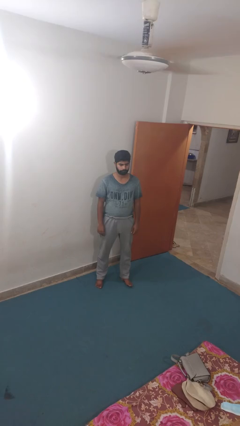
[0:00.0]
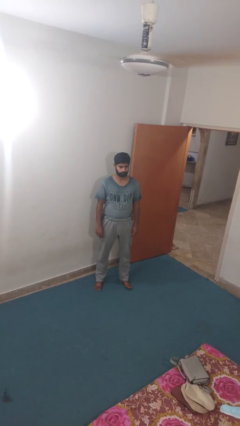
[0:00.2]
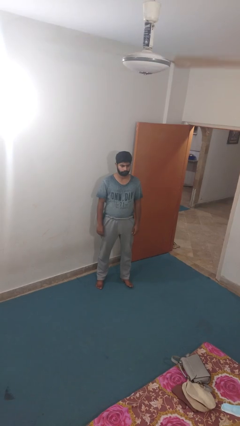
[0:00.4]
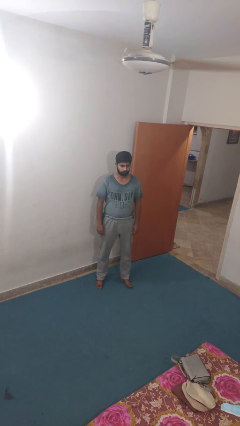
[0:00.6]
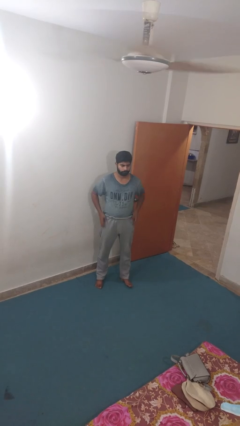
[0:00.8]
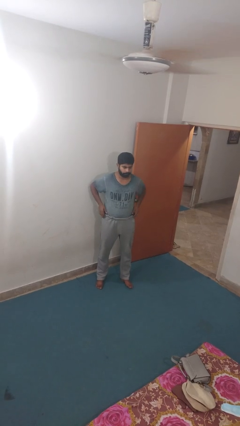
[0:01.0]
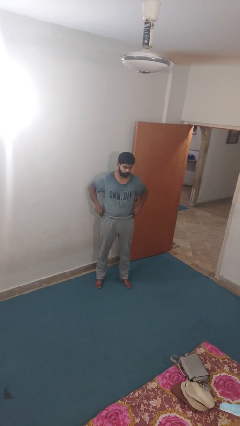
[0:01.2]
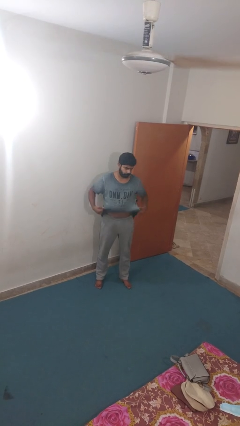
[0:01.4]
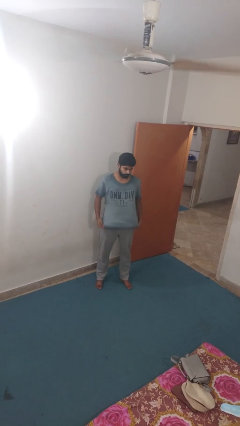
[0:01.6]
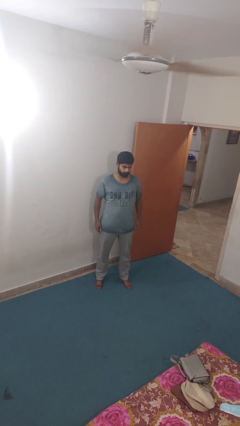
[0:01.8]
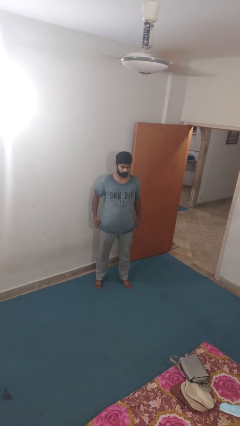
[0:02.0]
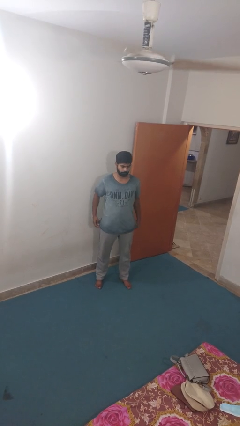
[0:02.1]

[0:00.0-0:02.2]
person untucks shirt

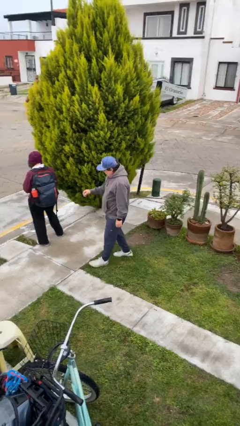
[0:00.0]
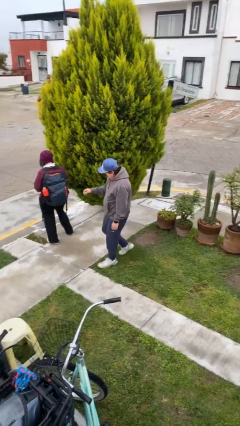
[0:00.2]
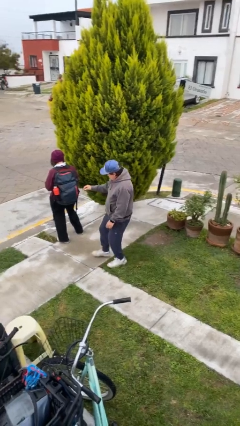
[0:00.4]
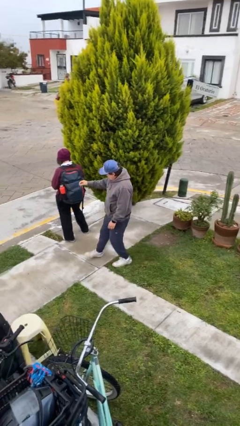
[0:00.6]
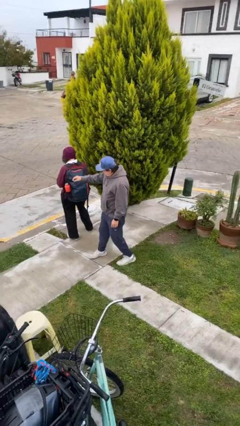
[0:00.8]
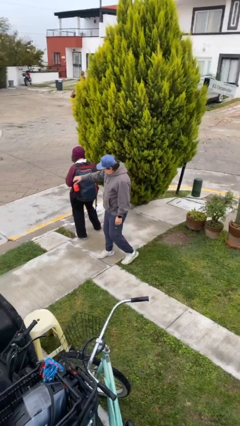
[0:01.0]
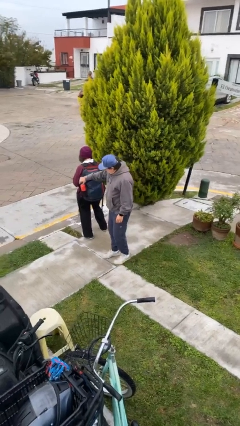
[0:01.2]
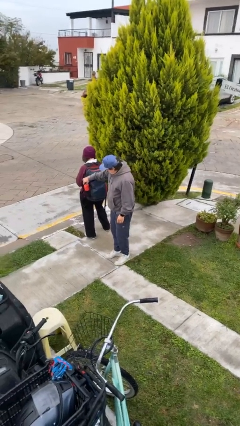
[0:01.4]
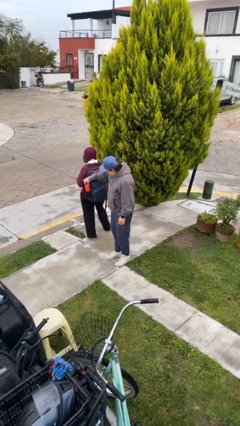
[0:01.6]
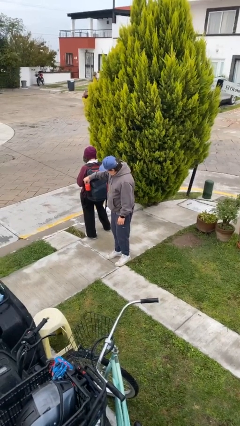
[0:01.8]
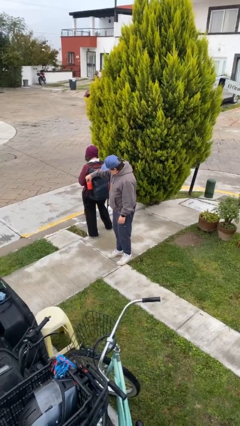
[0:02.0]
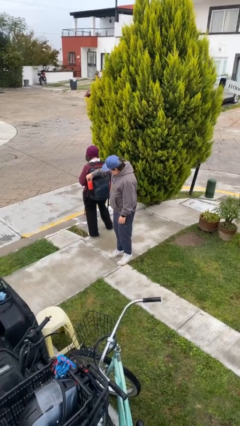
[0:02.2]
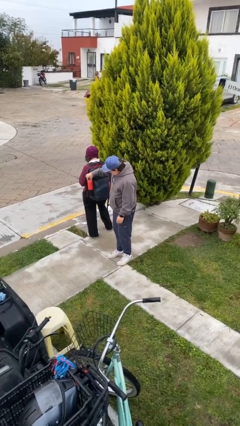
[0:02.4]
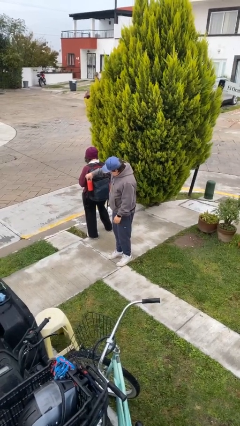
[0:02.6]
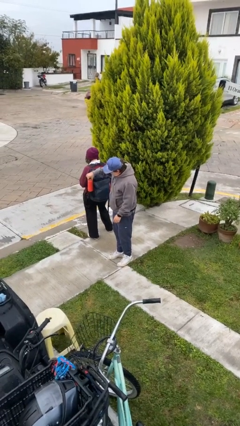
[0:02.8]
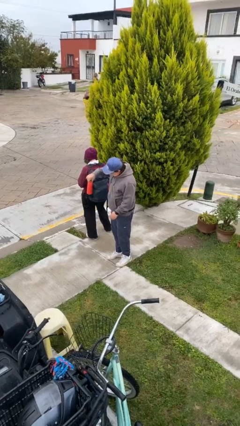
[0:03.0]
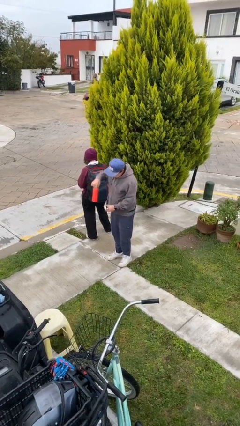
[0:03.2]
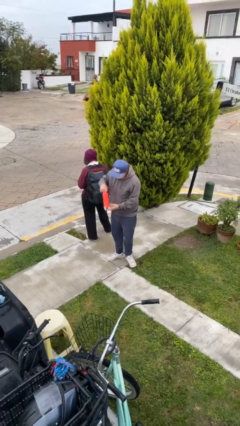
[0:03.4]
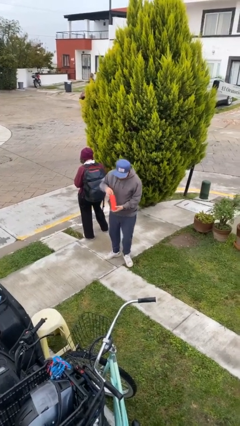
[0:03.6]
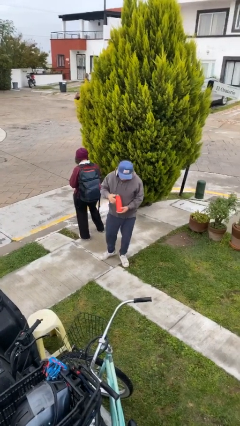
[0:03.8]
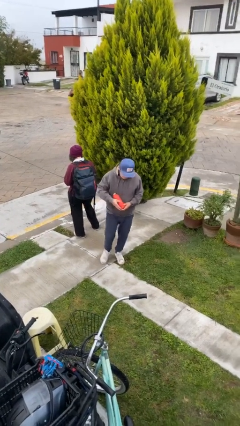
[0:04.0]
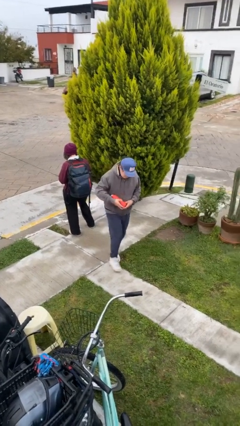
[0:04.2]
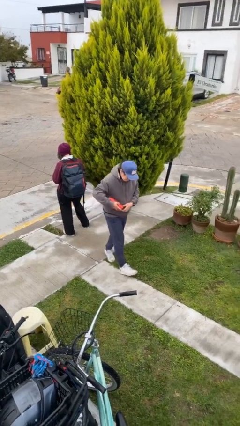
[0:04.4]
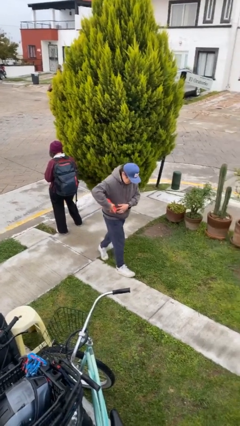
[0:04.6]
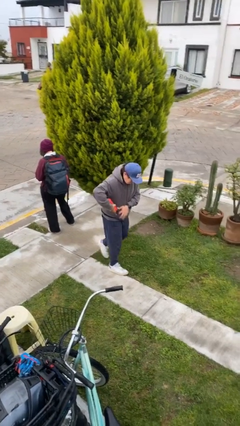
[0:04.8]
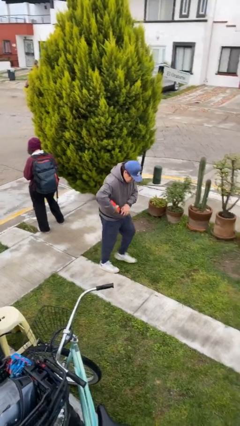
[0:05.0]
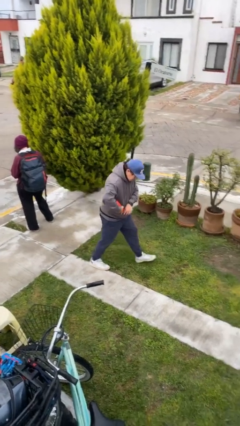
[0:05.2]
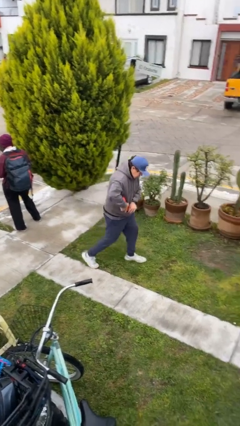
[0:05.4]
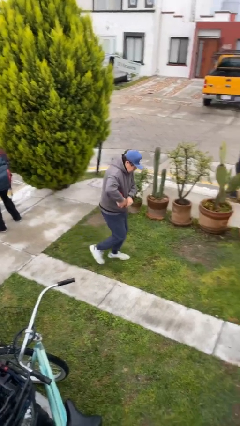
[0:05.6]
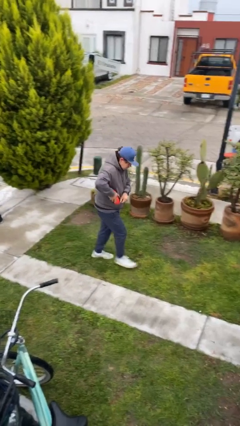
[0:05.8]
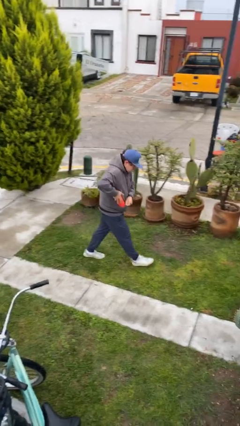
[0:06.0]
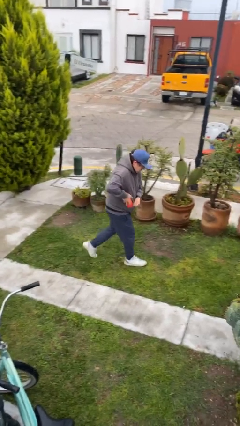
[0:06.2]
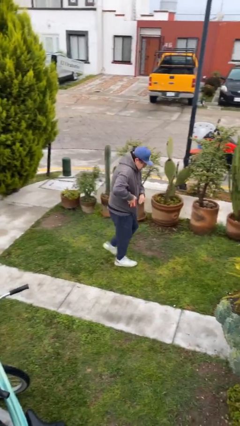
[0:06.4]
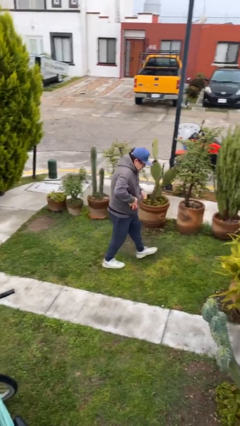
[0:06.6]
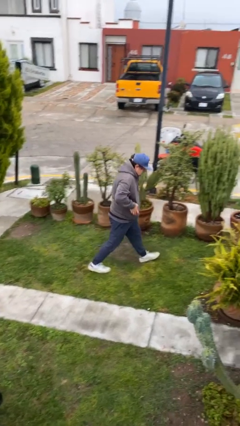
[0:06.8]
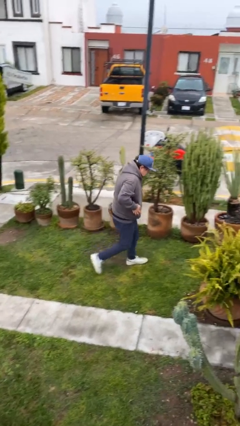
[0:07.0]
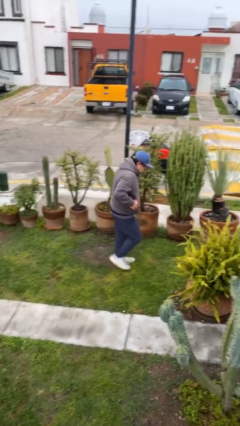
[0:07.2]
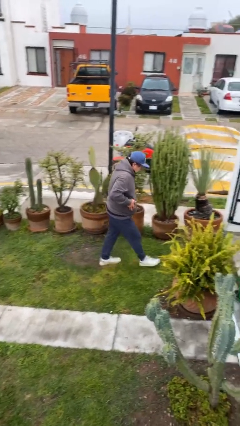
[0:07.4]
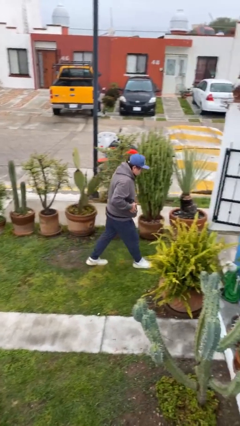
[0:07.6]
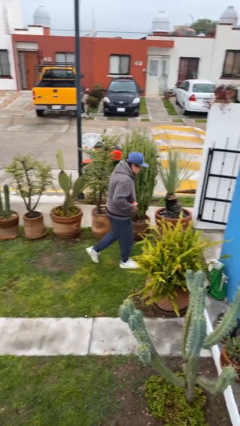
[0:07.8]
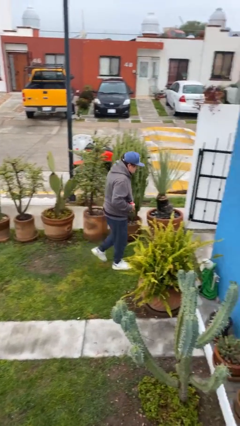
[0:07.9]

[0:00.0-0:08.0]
person steals object from person

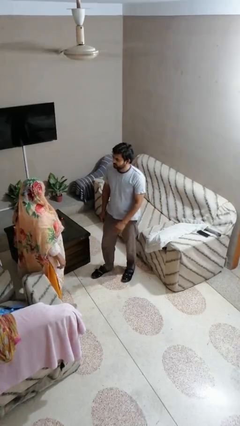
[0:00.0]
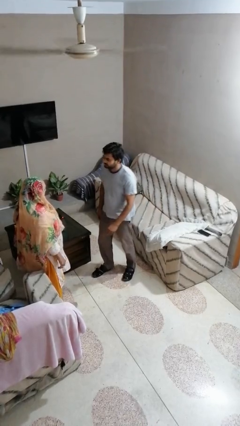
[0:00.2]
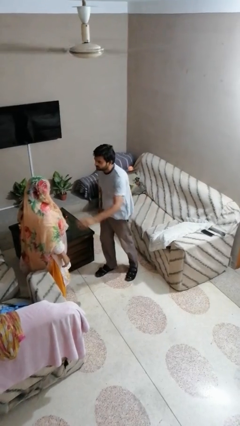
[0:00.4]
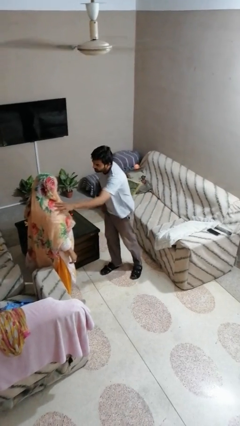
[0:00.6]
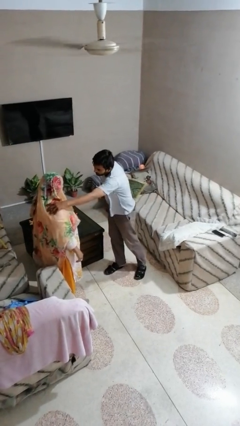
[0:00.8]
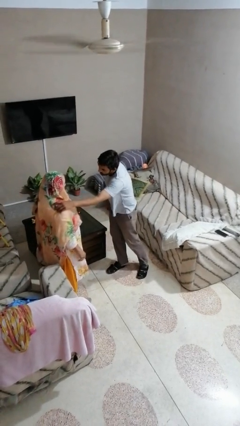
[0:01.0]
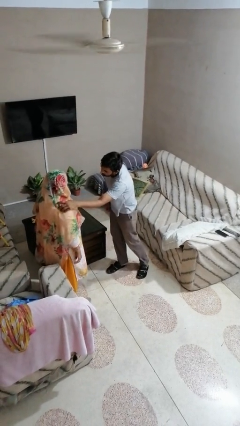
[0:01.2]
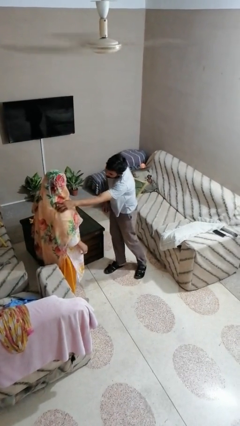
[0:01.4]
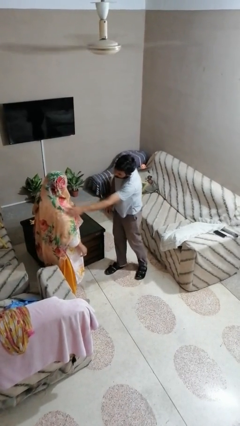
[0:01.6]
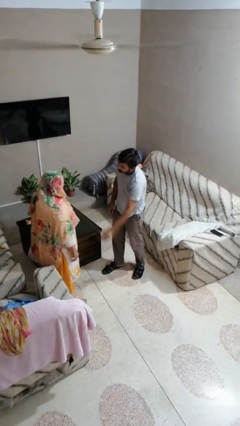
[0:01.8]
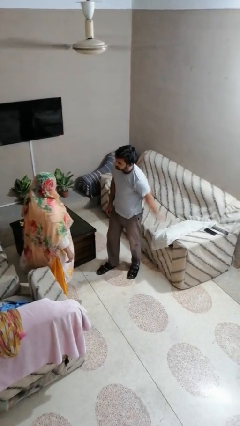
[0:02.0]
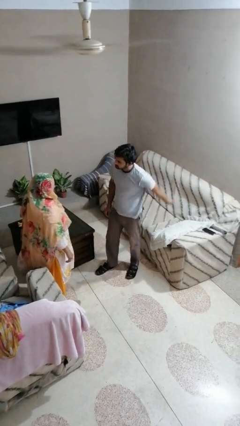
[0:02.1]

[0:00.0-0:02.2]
person shoves person

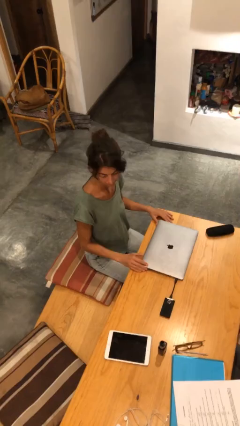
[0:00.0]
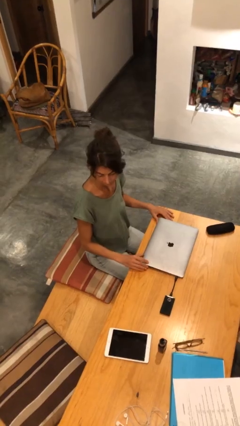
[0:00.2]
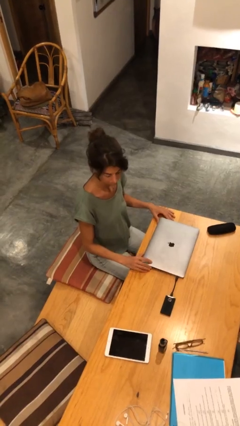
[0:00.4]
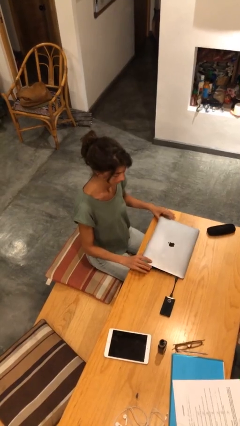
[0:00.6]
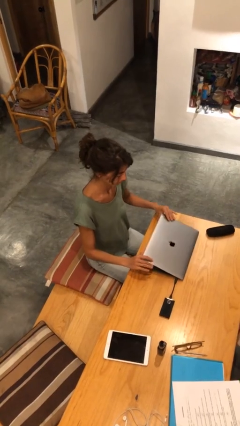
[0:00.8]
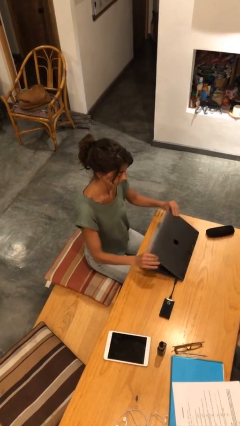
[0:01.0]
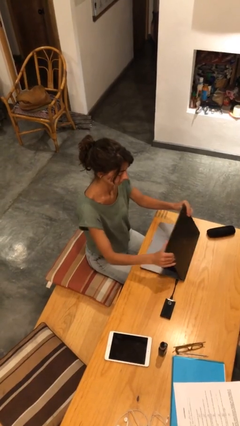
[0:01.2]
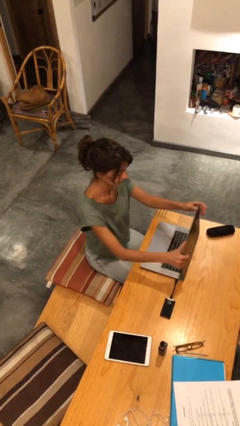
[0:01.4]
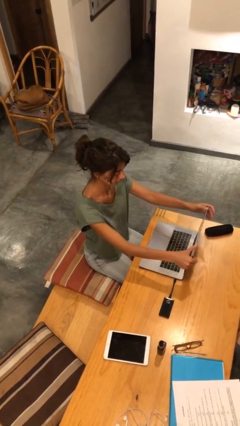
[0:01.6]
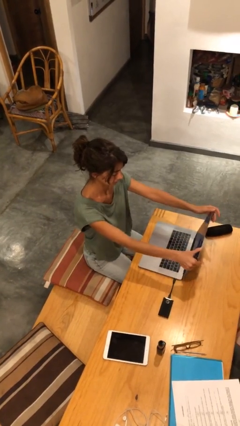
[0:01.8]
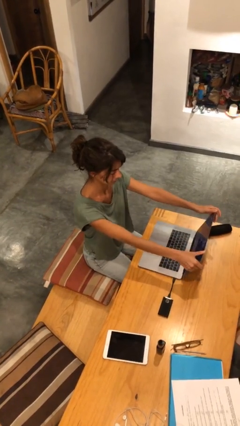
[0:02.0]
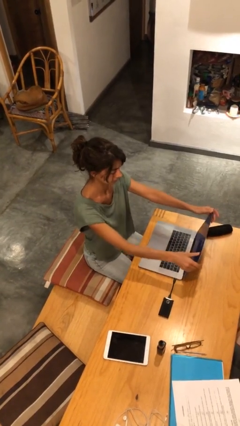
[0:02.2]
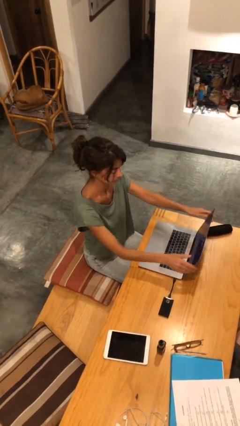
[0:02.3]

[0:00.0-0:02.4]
person opens laptop

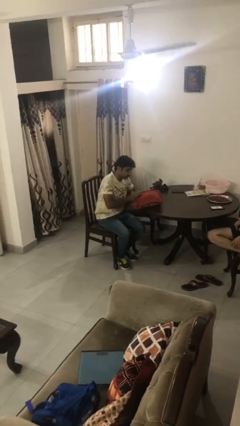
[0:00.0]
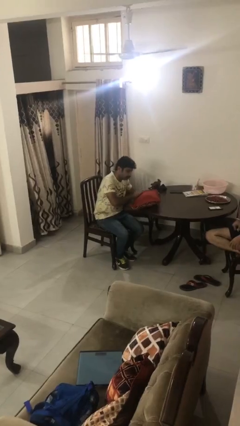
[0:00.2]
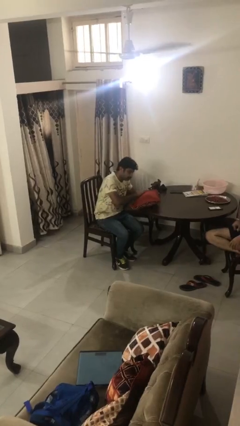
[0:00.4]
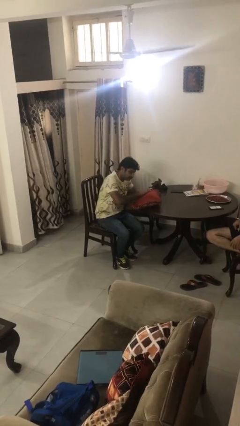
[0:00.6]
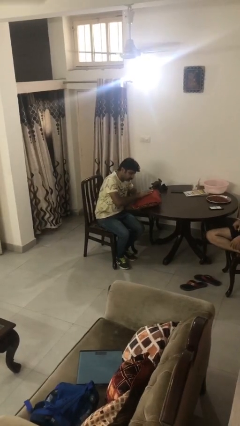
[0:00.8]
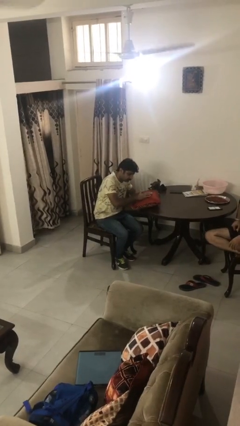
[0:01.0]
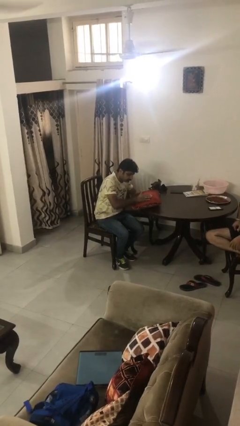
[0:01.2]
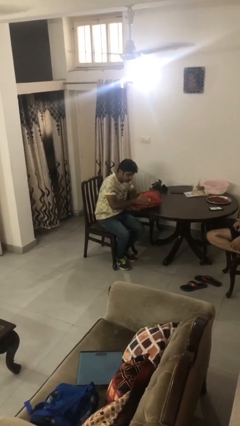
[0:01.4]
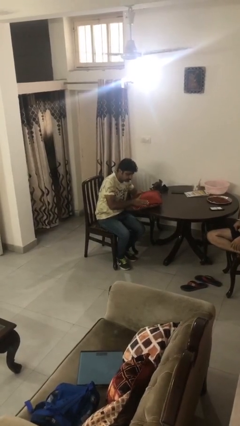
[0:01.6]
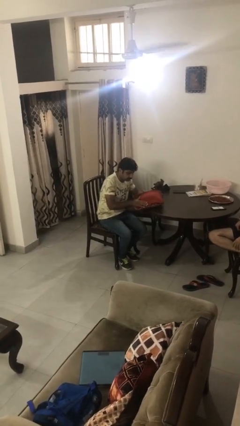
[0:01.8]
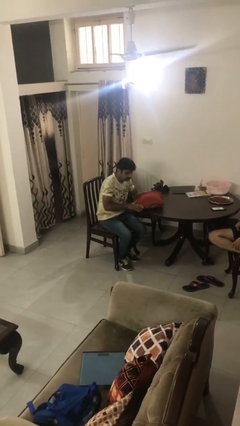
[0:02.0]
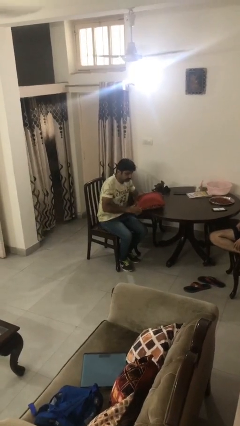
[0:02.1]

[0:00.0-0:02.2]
person waves hand over object

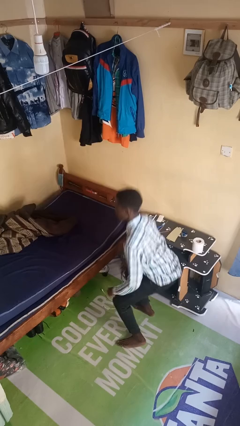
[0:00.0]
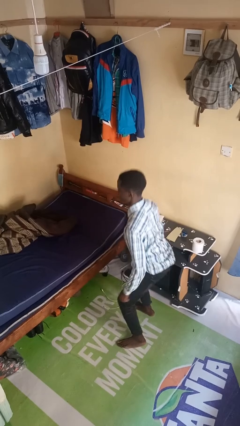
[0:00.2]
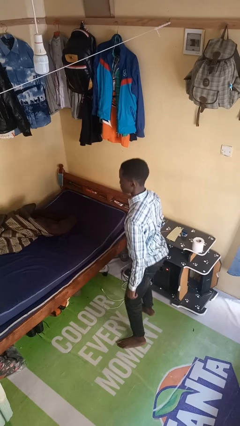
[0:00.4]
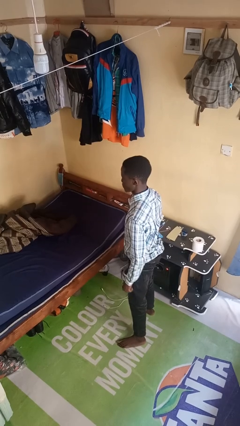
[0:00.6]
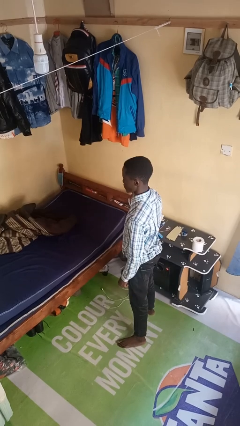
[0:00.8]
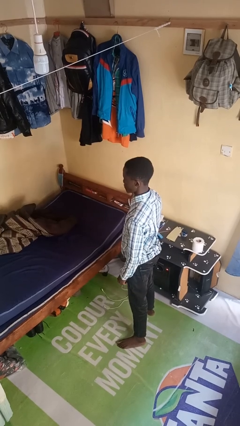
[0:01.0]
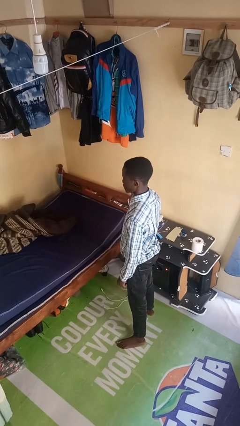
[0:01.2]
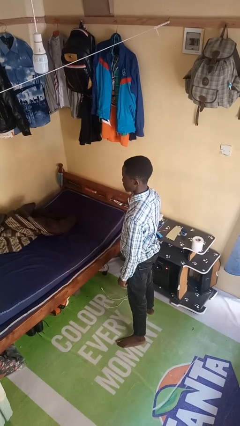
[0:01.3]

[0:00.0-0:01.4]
person stands up
